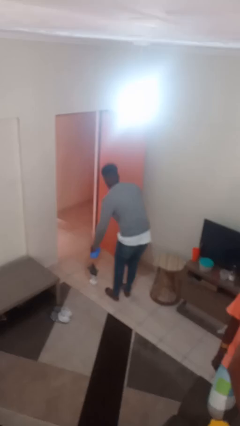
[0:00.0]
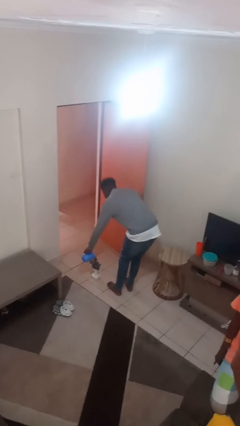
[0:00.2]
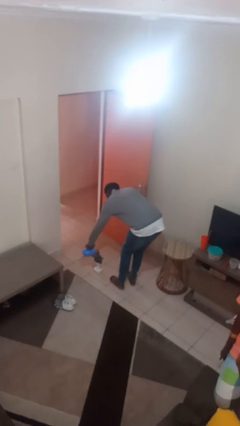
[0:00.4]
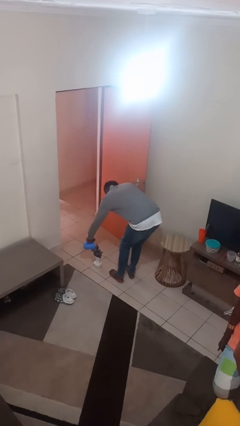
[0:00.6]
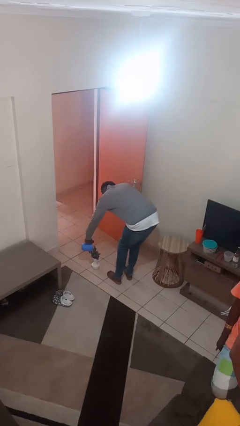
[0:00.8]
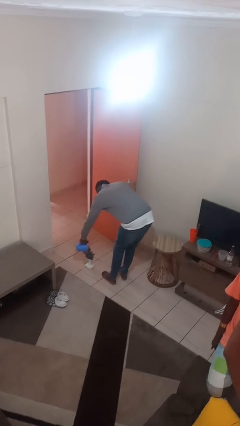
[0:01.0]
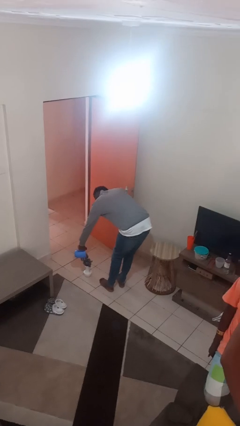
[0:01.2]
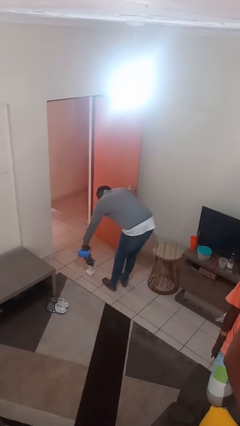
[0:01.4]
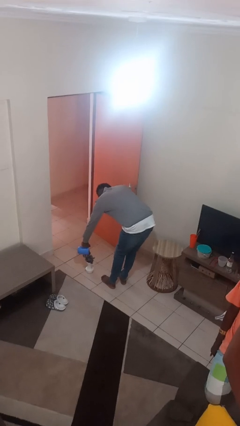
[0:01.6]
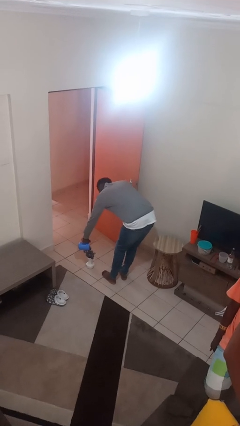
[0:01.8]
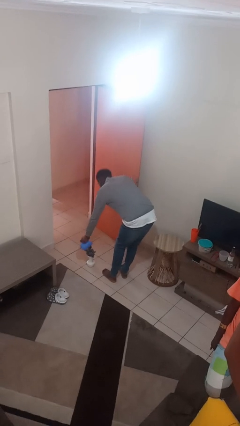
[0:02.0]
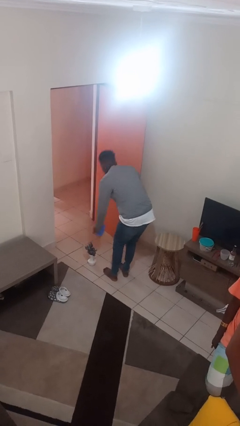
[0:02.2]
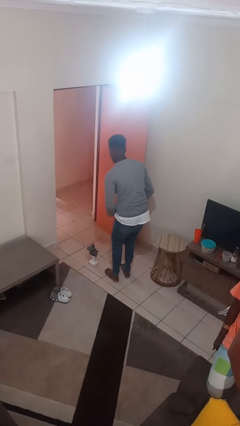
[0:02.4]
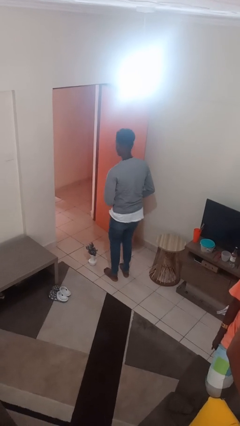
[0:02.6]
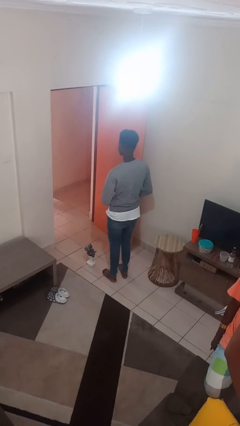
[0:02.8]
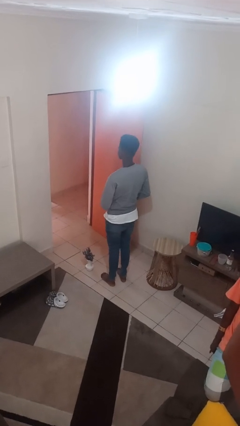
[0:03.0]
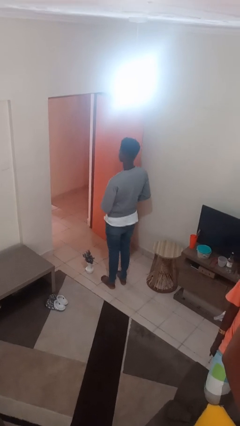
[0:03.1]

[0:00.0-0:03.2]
person waters houseplant

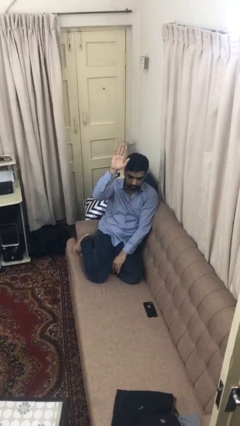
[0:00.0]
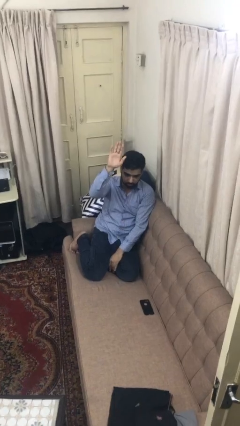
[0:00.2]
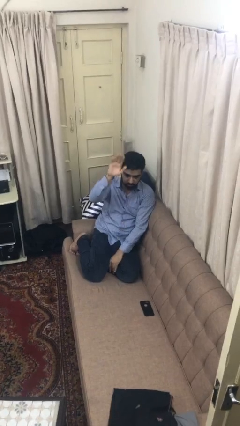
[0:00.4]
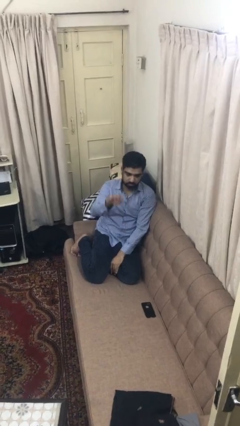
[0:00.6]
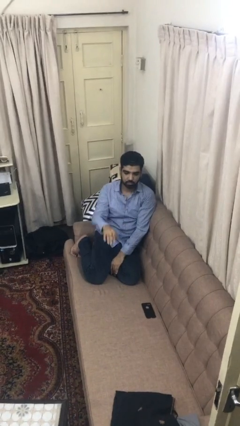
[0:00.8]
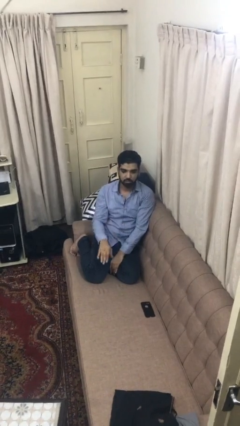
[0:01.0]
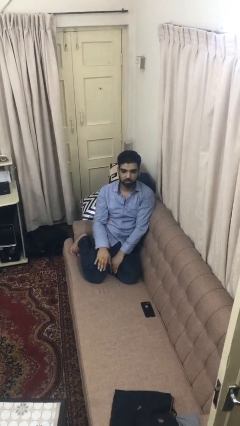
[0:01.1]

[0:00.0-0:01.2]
person gestures lower hand

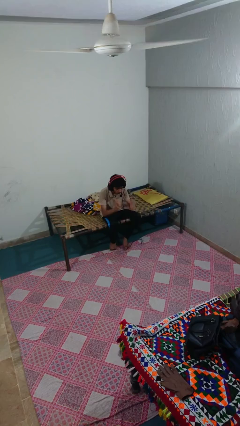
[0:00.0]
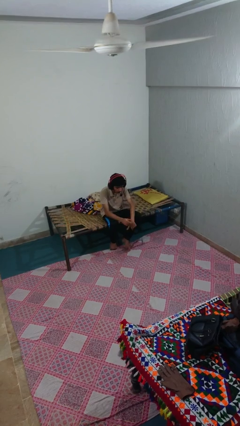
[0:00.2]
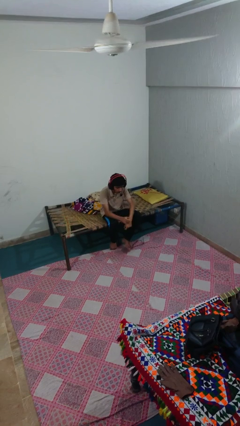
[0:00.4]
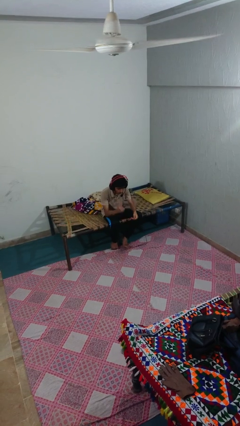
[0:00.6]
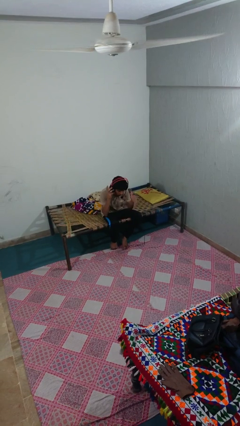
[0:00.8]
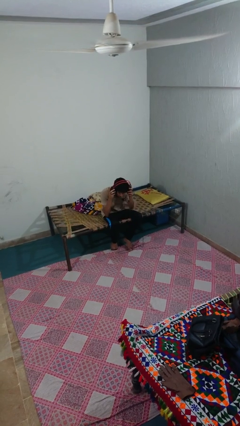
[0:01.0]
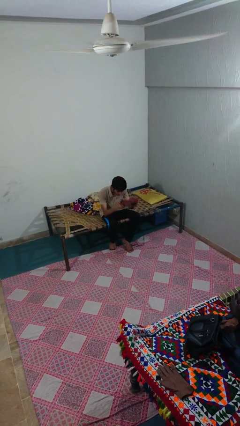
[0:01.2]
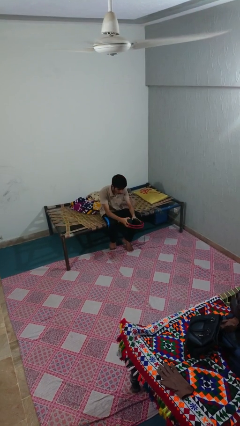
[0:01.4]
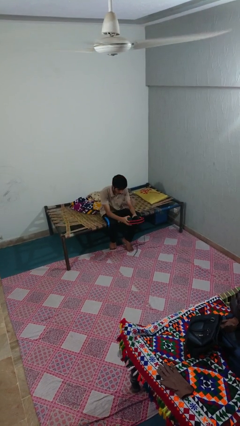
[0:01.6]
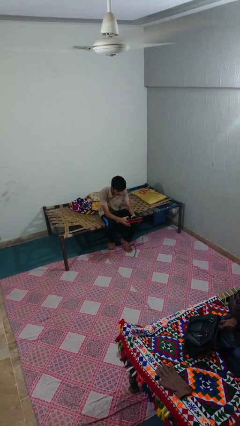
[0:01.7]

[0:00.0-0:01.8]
person takes off headphones

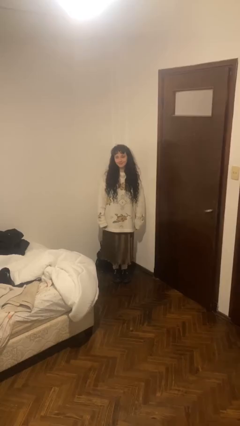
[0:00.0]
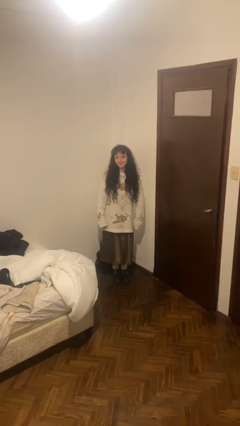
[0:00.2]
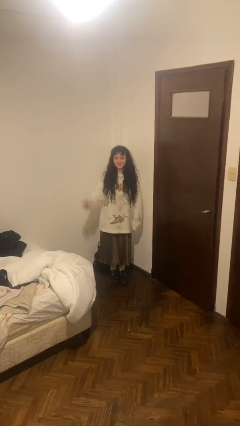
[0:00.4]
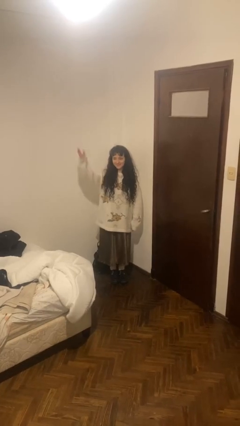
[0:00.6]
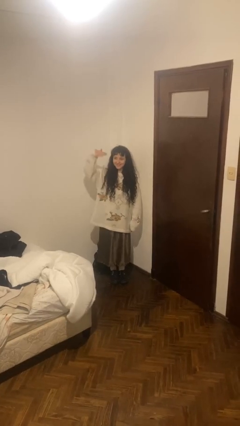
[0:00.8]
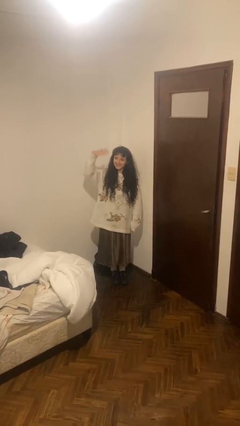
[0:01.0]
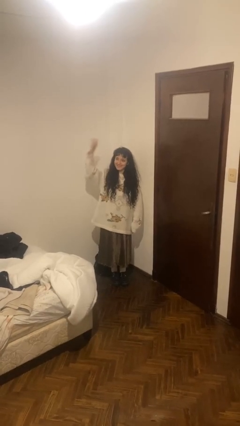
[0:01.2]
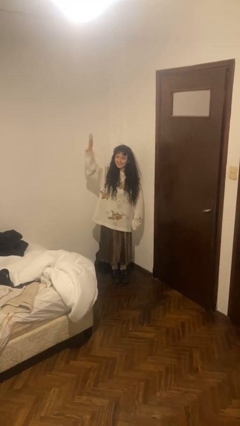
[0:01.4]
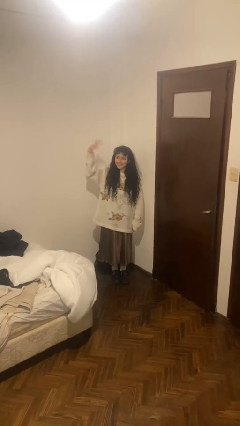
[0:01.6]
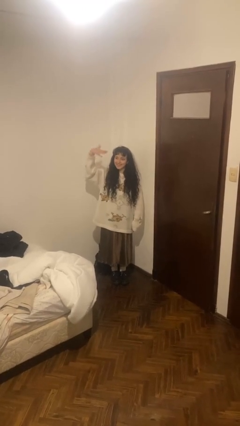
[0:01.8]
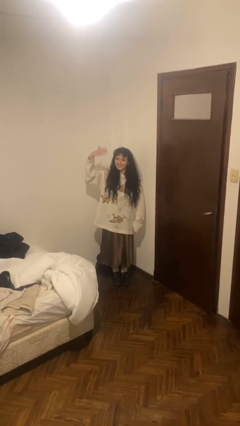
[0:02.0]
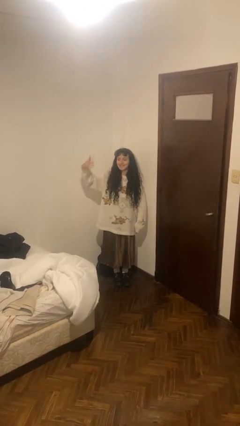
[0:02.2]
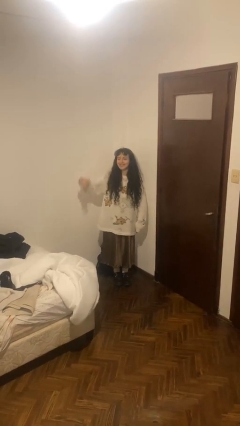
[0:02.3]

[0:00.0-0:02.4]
person gestures come here

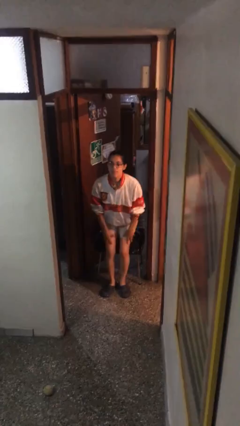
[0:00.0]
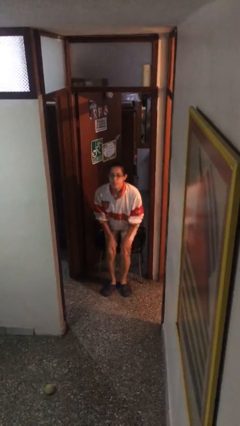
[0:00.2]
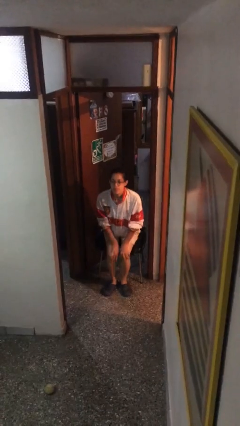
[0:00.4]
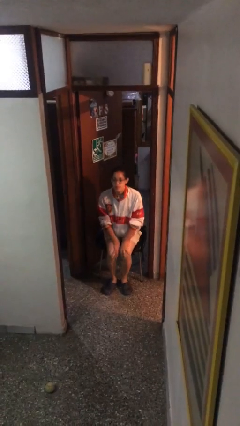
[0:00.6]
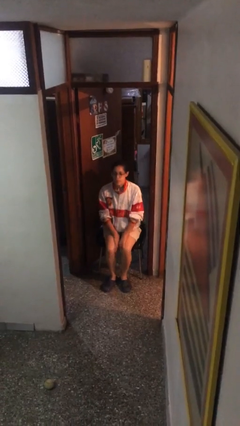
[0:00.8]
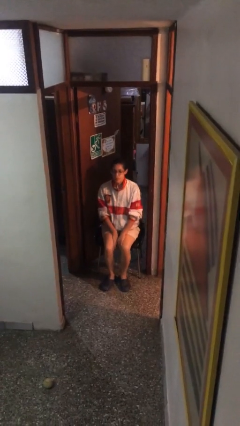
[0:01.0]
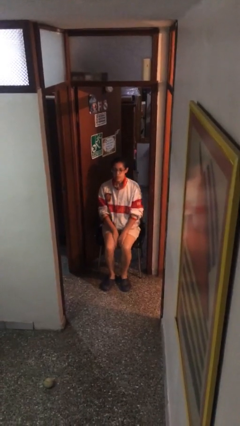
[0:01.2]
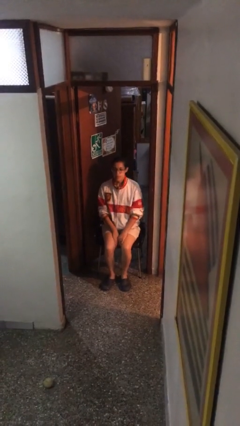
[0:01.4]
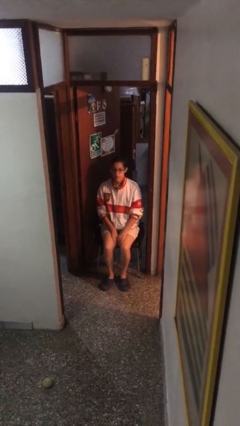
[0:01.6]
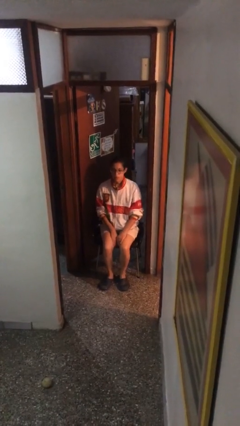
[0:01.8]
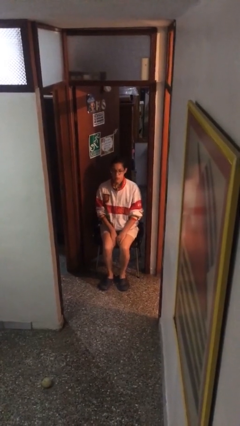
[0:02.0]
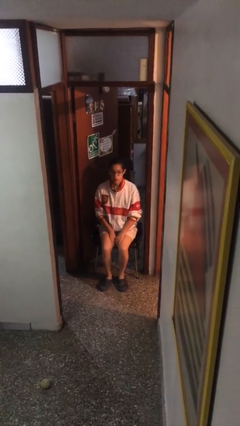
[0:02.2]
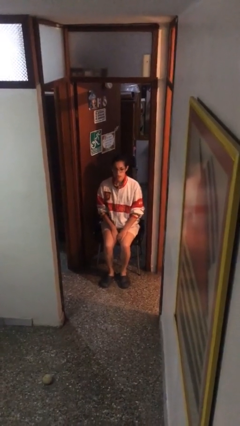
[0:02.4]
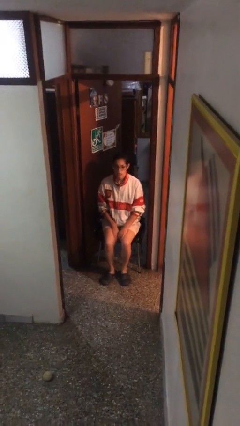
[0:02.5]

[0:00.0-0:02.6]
person sits down

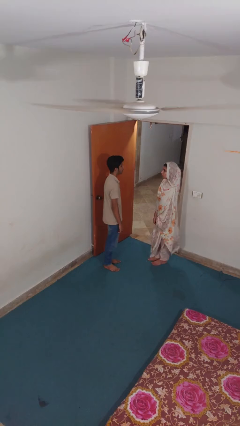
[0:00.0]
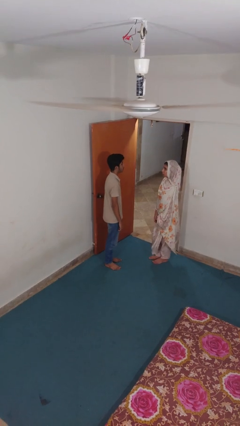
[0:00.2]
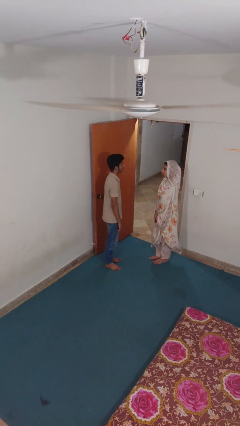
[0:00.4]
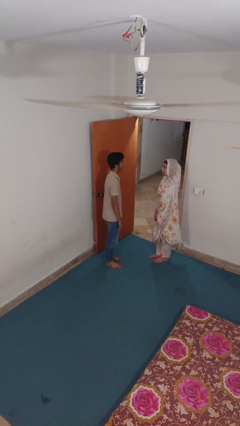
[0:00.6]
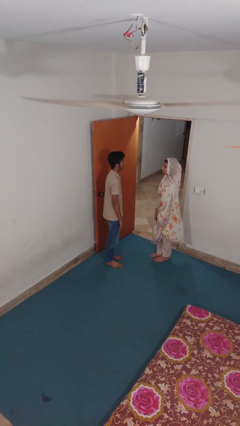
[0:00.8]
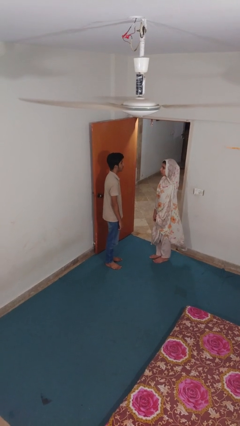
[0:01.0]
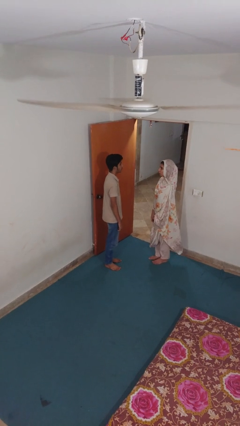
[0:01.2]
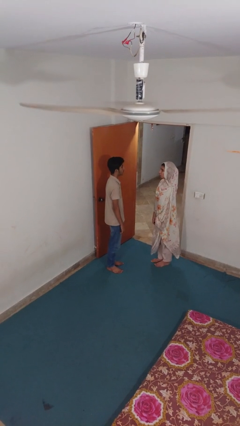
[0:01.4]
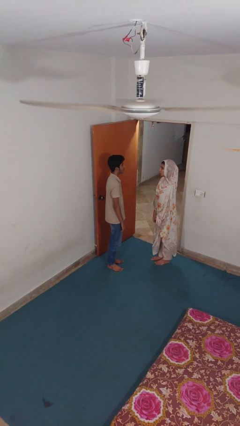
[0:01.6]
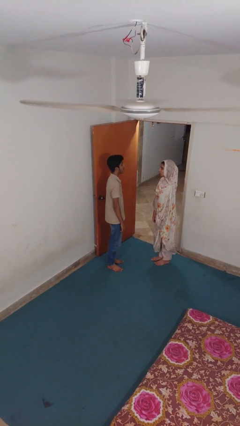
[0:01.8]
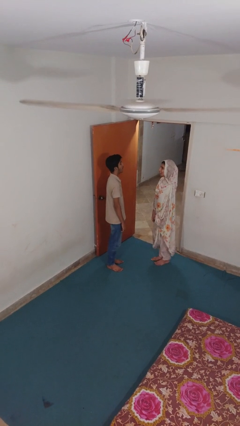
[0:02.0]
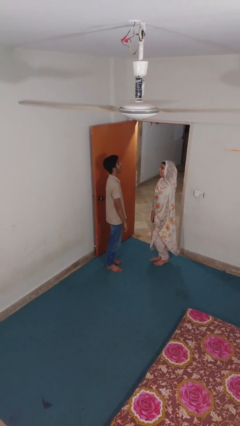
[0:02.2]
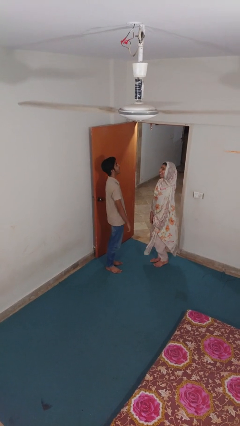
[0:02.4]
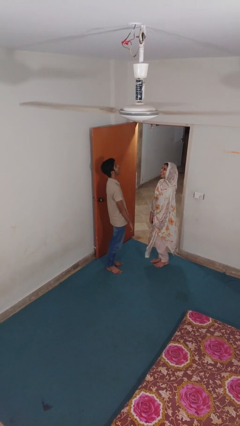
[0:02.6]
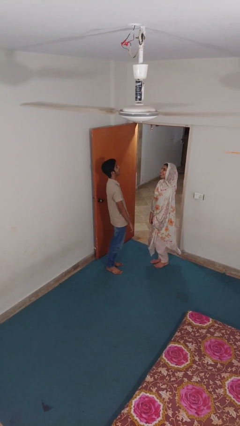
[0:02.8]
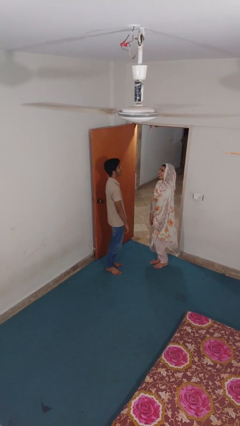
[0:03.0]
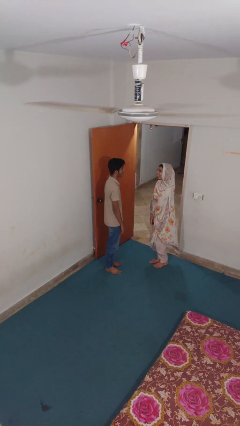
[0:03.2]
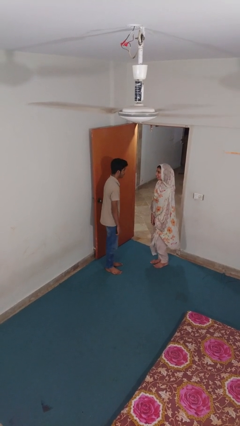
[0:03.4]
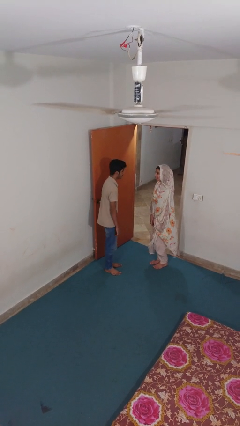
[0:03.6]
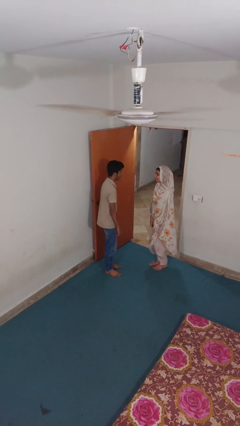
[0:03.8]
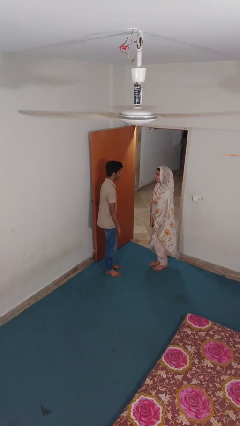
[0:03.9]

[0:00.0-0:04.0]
person laughs with person

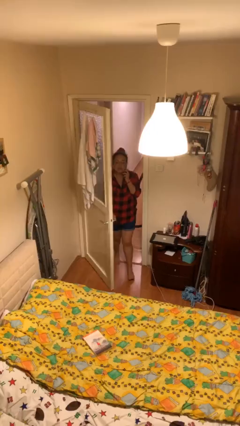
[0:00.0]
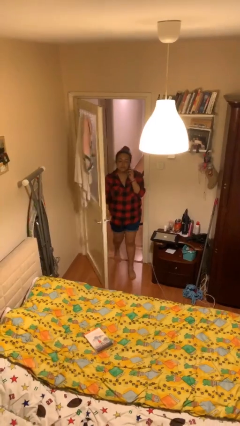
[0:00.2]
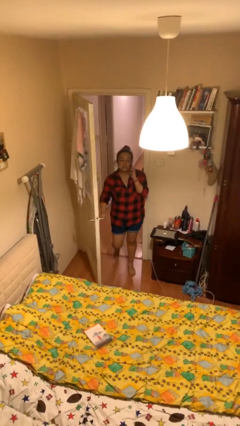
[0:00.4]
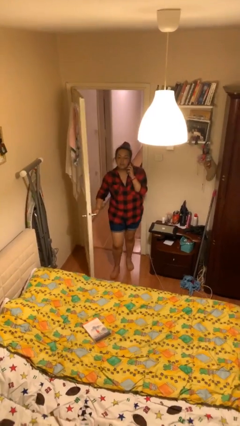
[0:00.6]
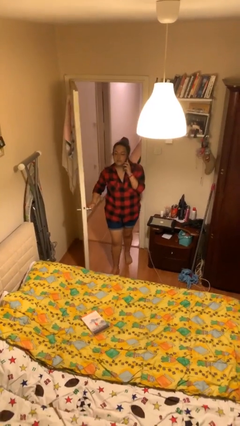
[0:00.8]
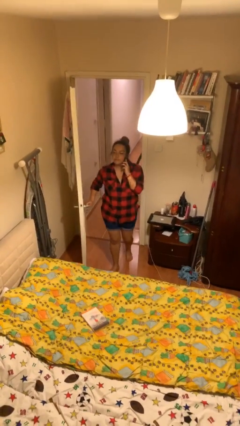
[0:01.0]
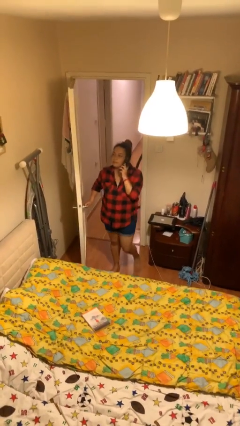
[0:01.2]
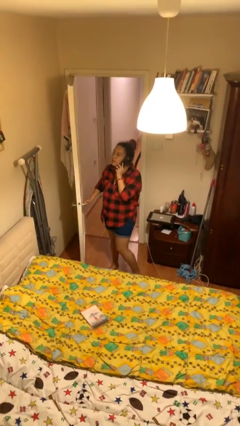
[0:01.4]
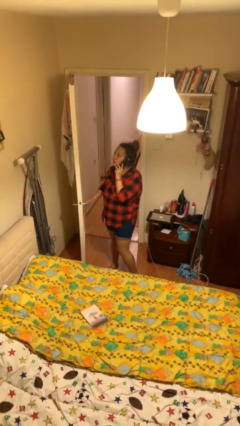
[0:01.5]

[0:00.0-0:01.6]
person enters scene through structure

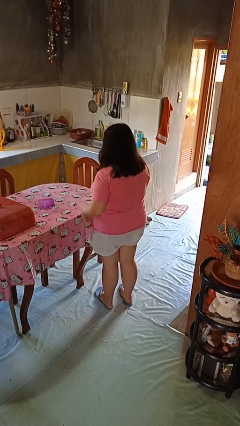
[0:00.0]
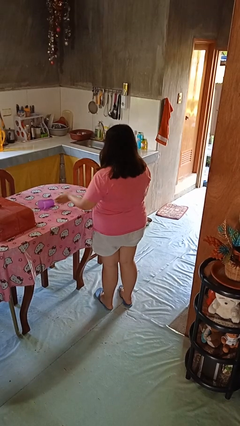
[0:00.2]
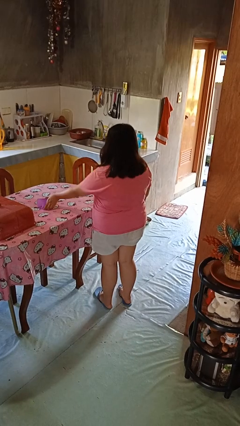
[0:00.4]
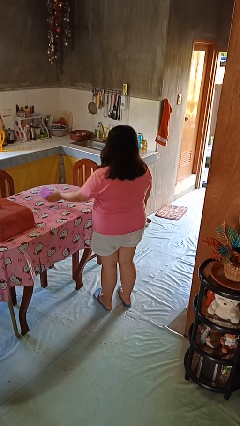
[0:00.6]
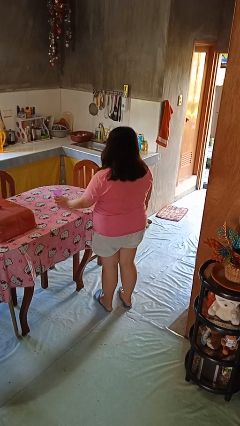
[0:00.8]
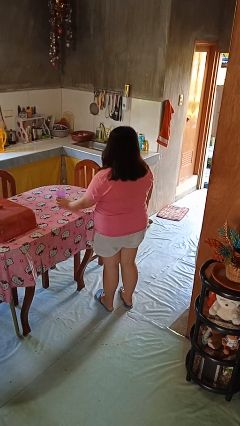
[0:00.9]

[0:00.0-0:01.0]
person sets upright glass
